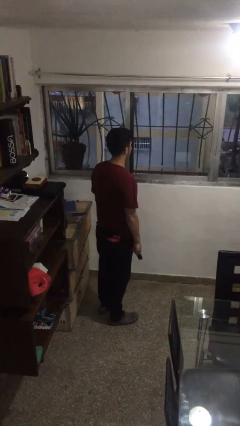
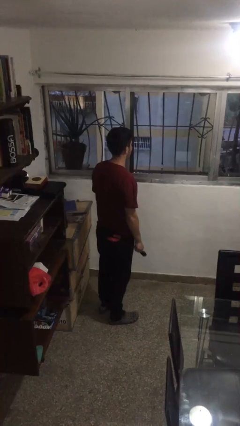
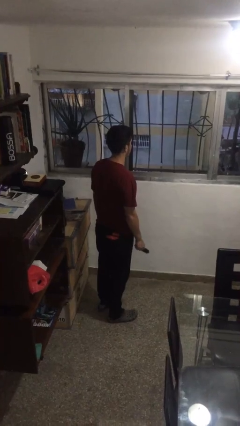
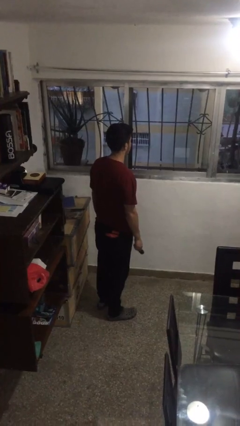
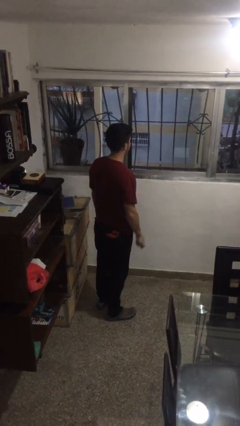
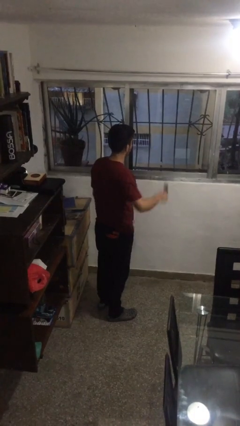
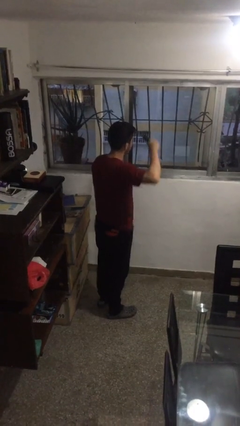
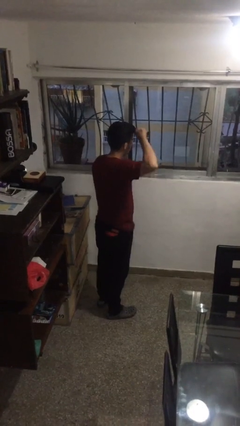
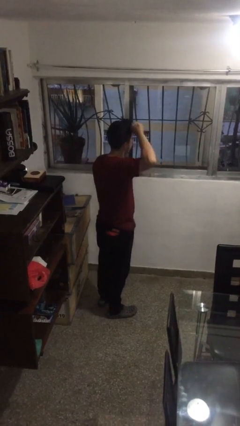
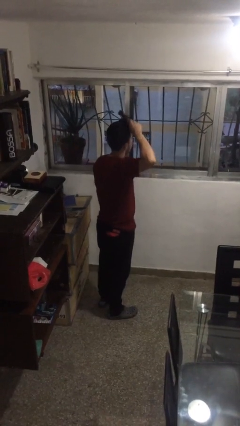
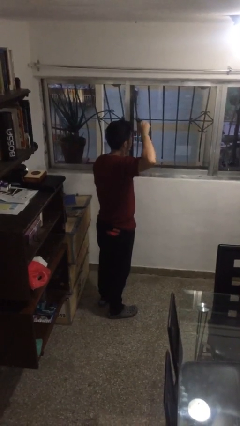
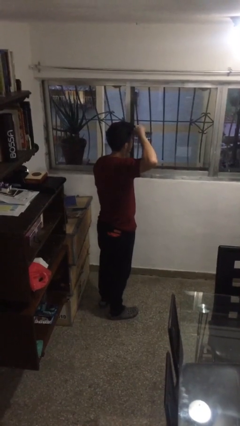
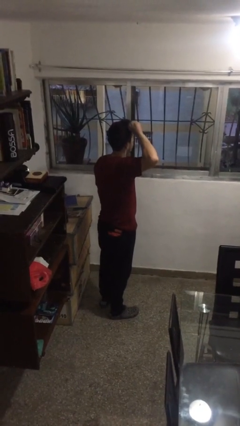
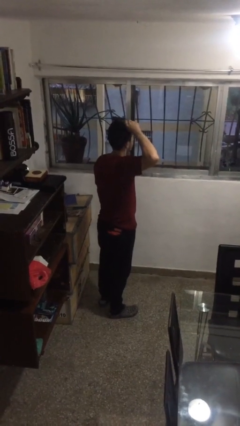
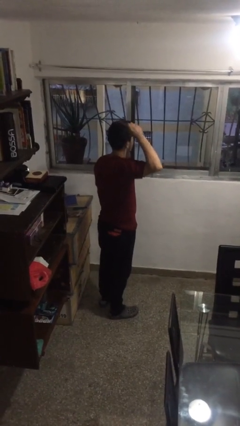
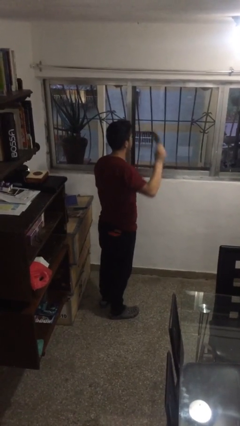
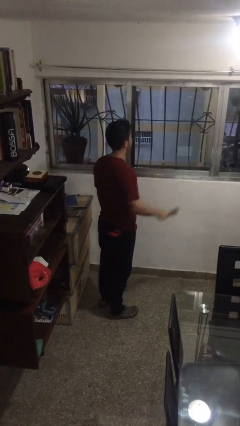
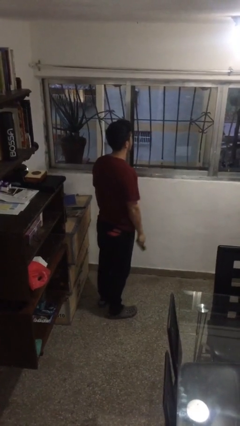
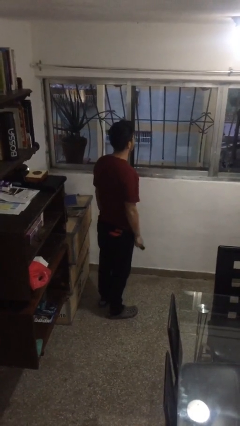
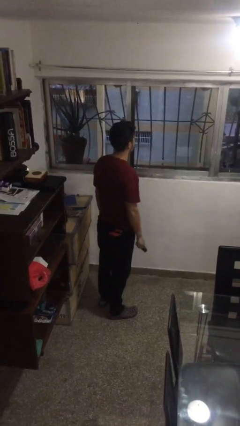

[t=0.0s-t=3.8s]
person brushes hair

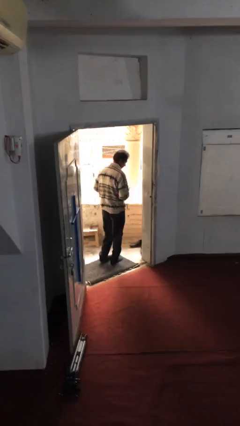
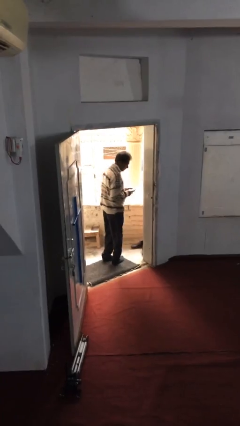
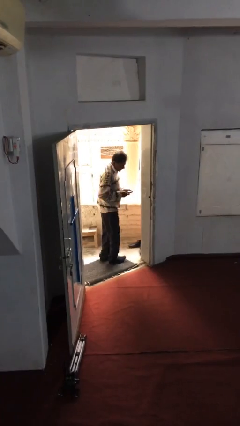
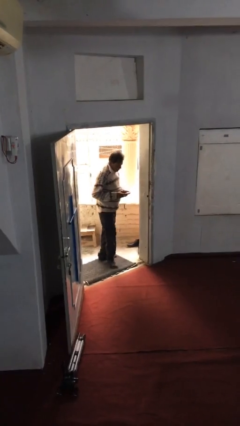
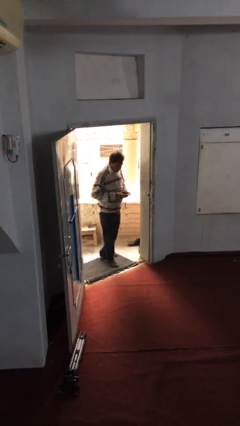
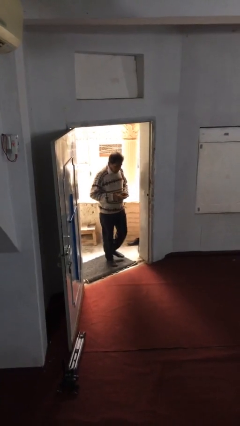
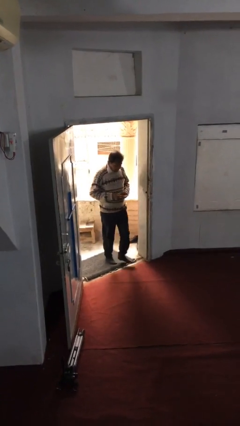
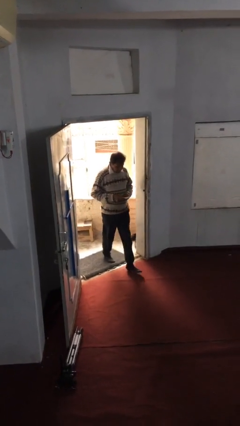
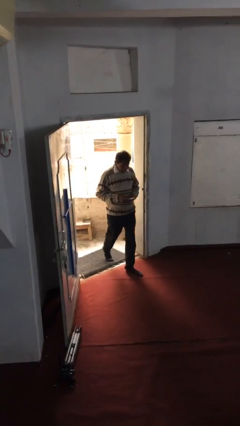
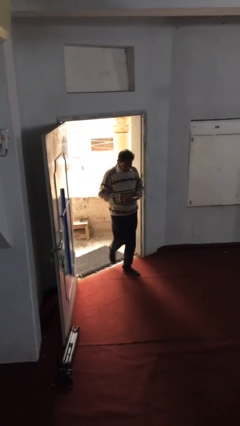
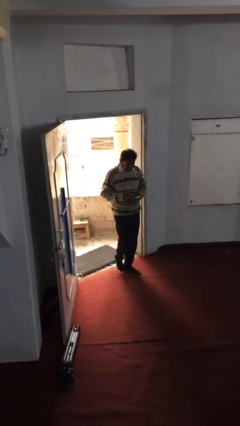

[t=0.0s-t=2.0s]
person enters scene through structure

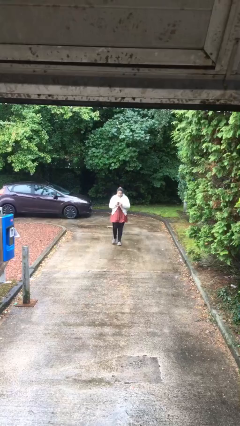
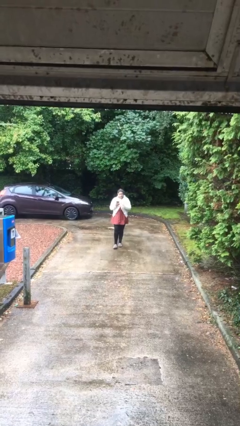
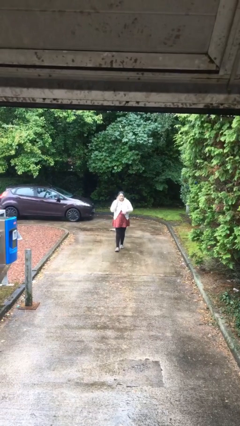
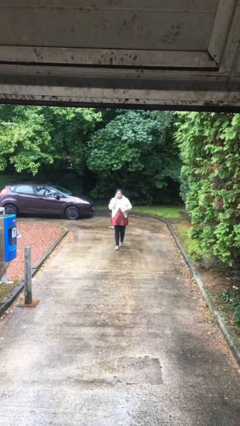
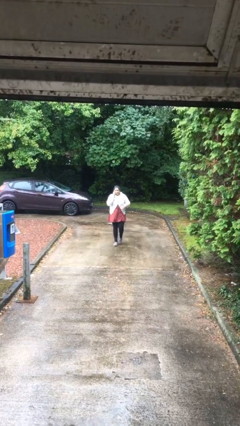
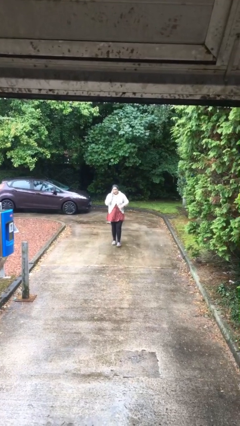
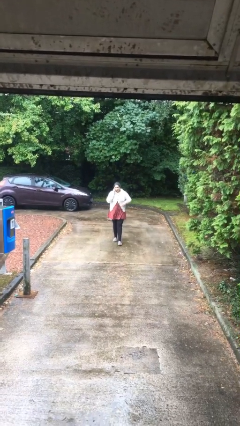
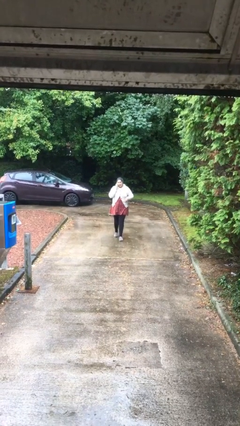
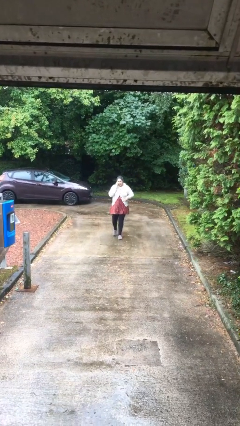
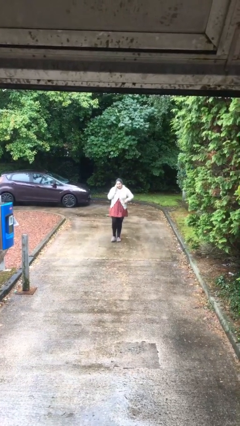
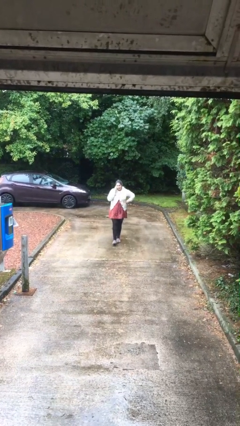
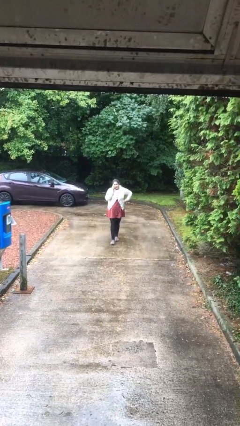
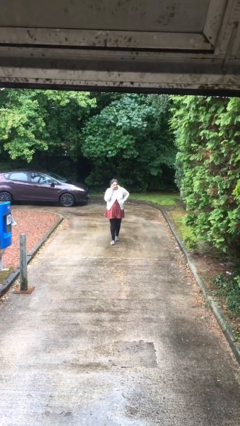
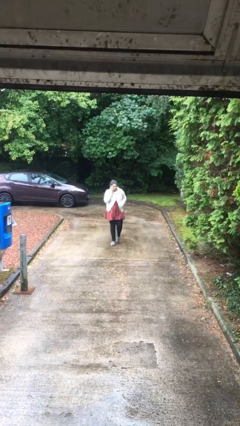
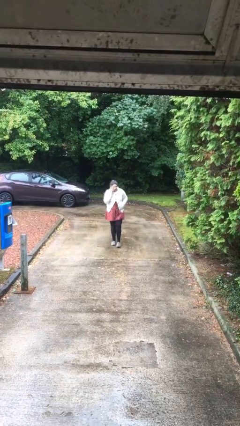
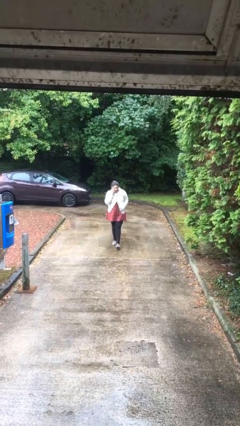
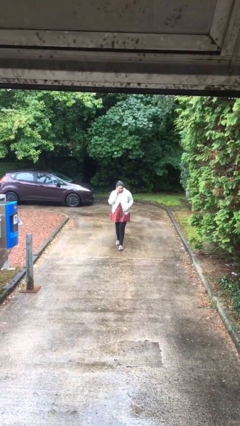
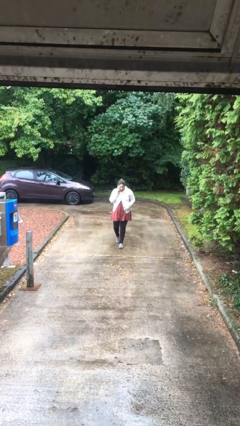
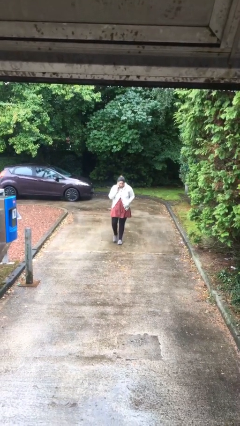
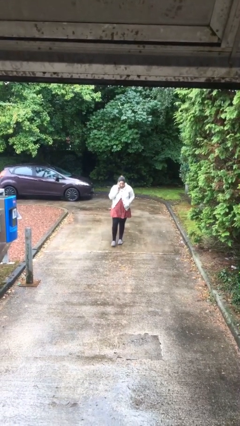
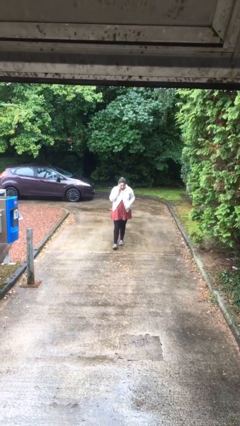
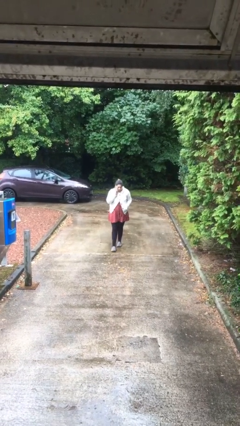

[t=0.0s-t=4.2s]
person talks on phone

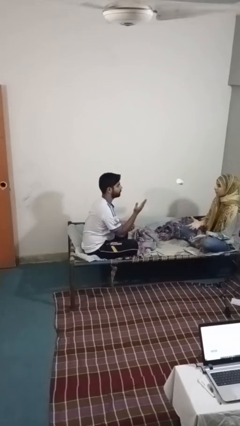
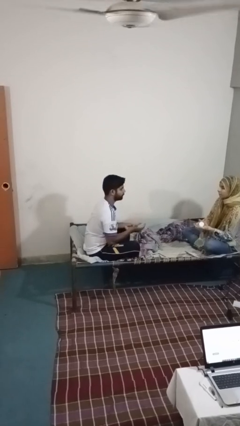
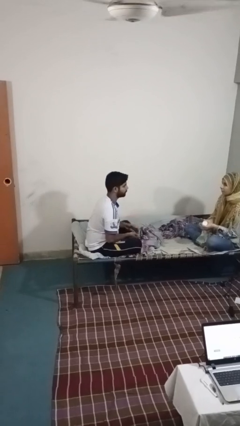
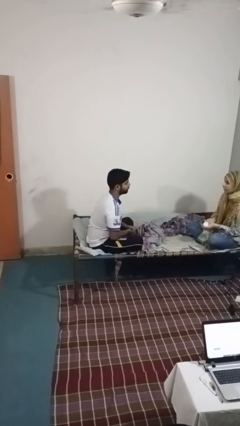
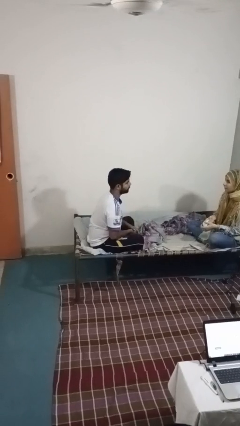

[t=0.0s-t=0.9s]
person throws object to person

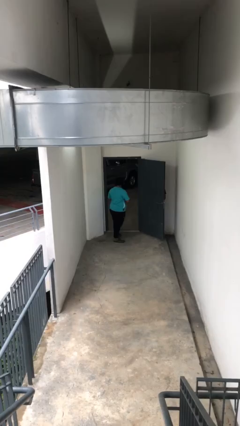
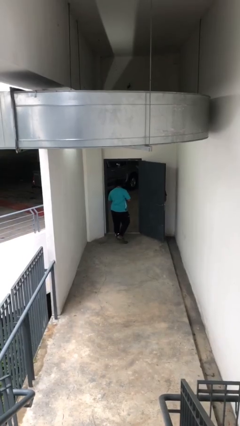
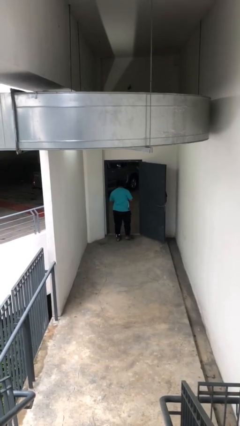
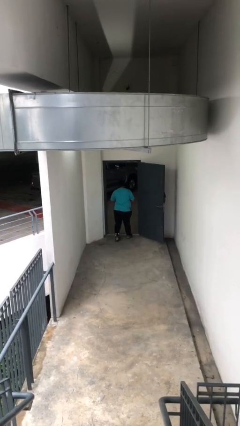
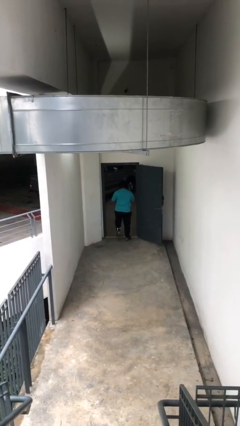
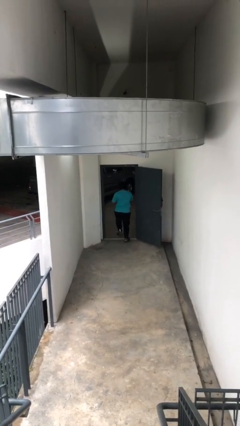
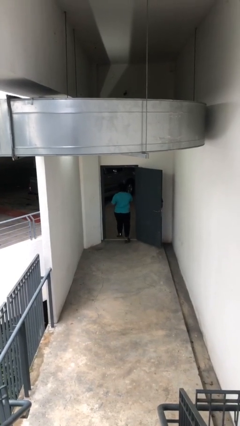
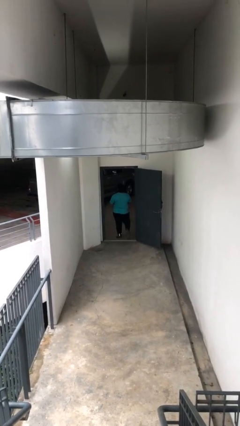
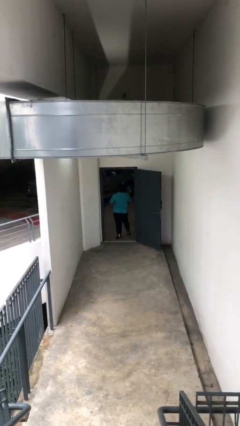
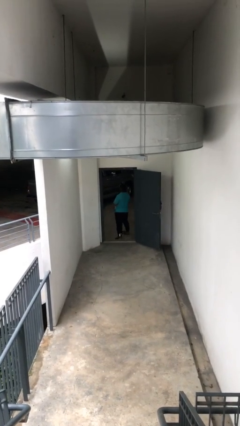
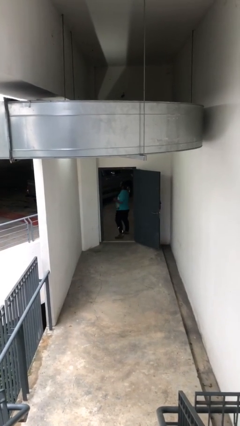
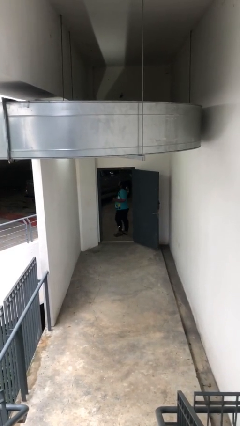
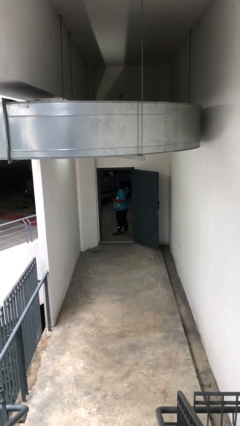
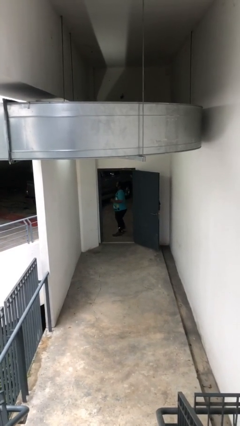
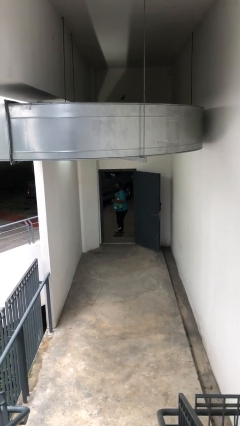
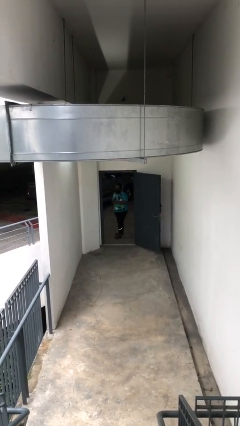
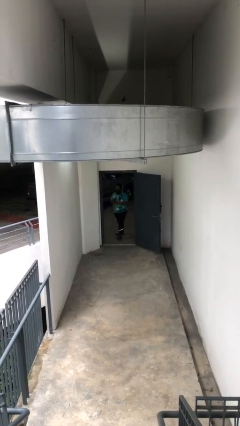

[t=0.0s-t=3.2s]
person exits scene through structure

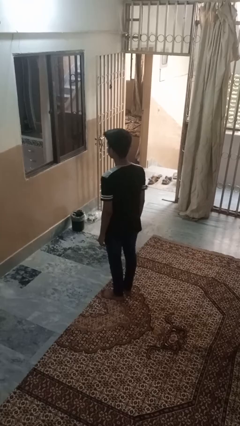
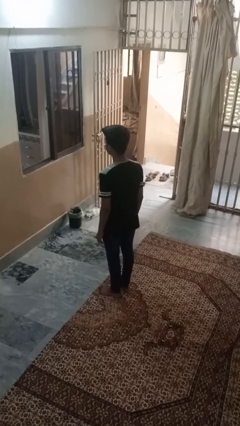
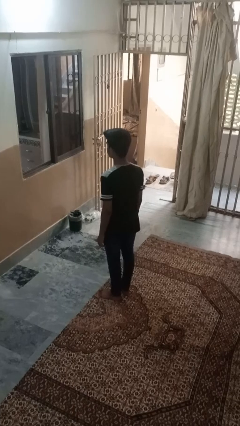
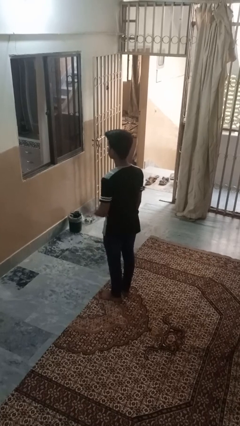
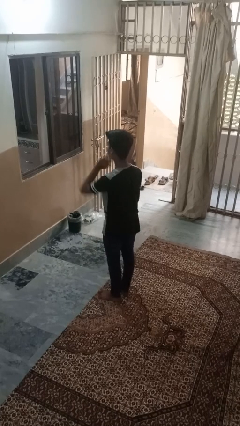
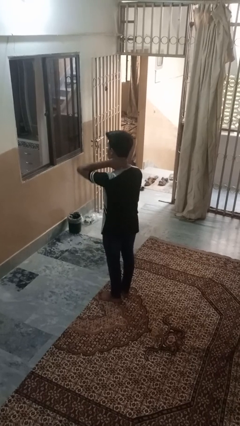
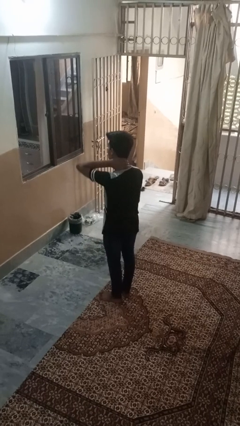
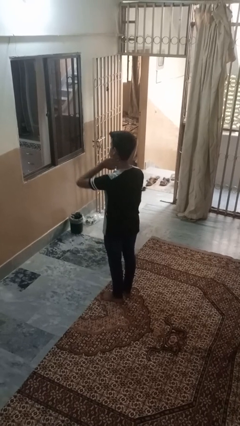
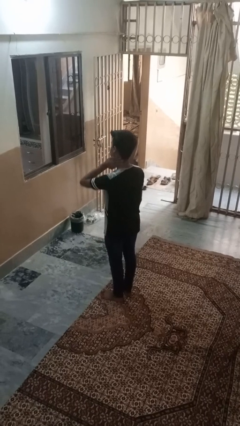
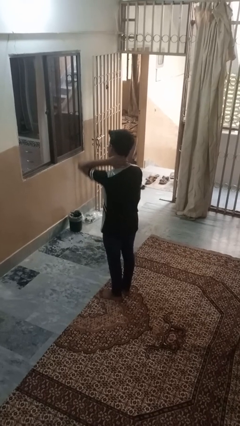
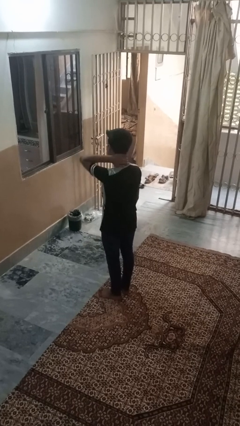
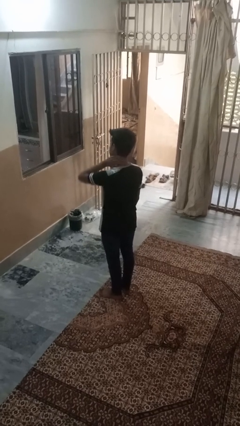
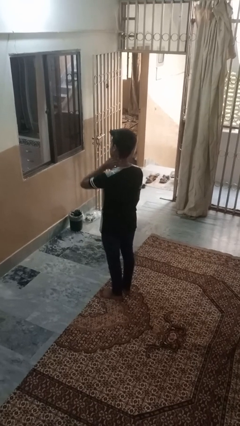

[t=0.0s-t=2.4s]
person rubs neck

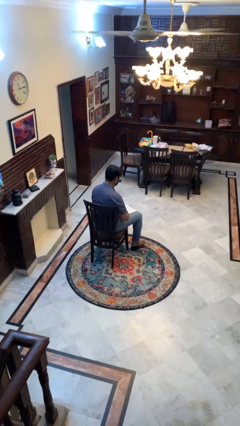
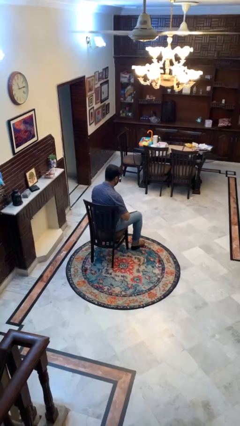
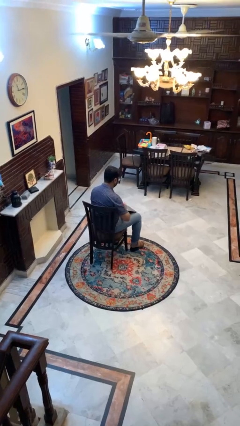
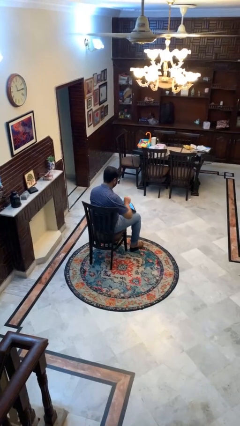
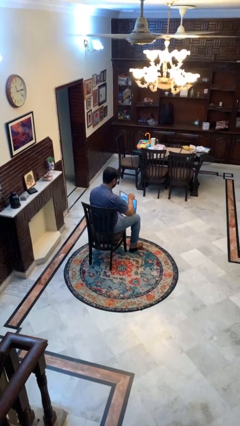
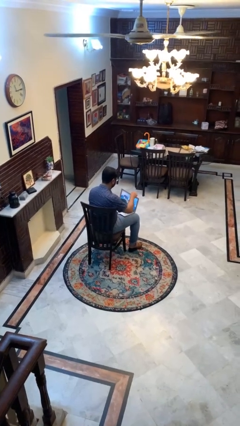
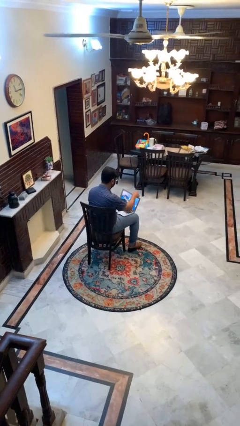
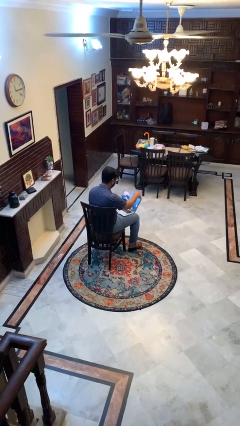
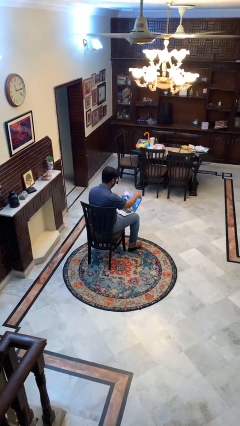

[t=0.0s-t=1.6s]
person opens laptop
